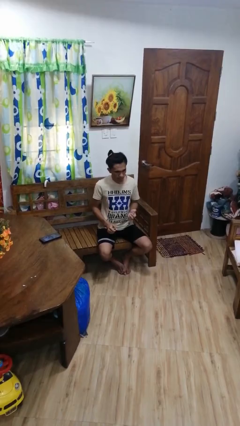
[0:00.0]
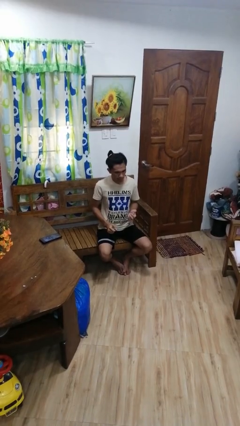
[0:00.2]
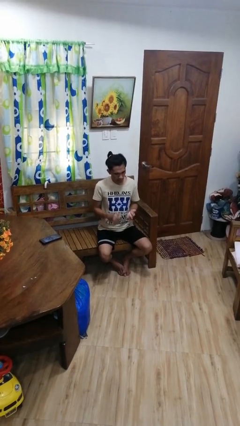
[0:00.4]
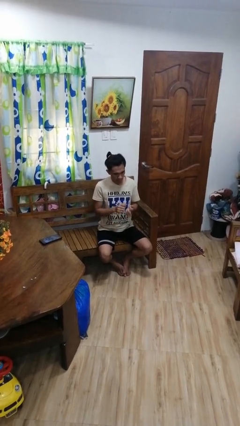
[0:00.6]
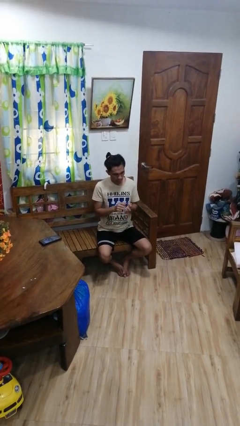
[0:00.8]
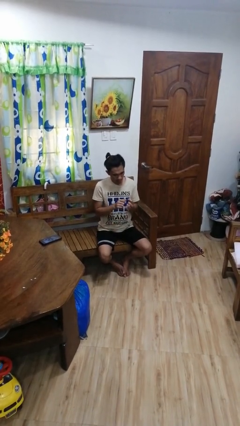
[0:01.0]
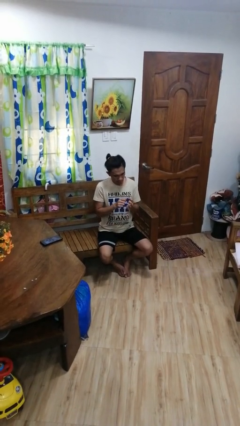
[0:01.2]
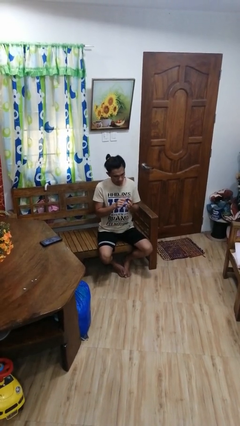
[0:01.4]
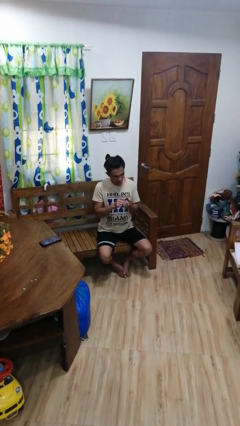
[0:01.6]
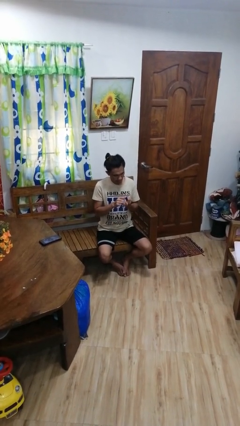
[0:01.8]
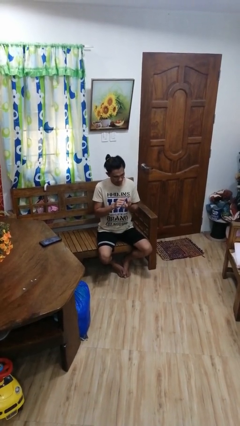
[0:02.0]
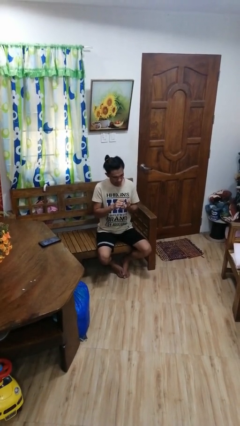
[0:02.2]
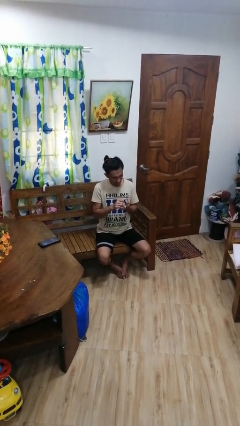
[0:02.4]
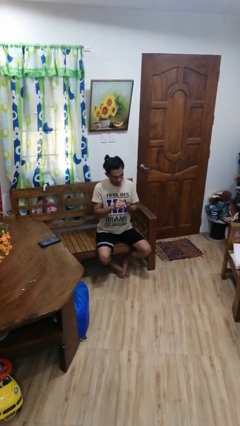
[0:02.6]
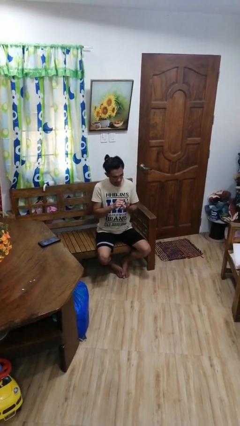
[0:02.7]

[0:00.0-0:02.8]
person files fingernails

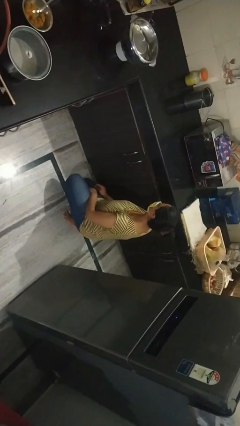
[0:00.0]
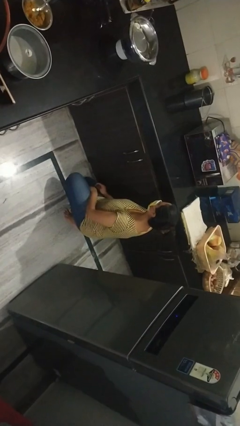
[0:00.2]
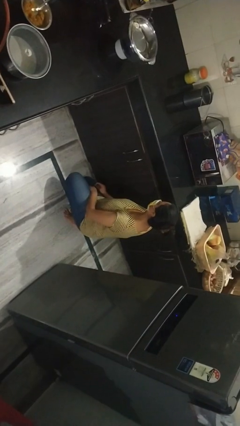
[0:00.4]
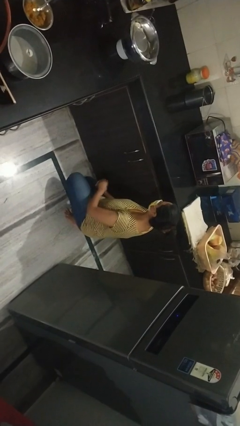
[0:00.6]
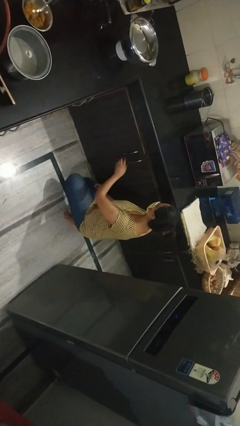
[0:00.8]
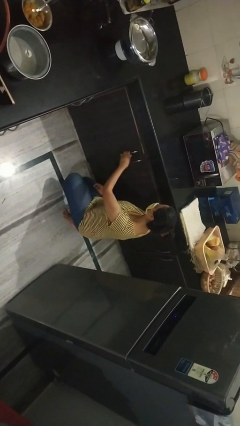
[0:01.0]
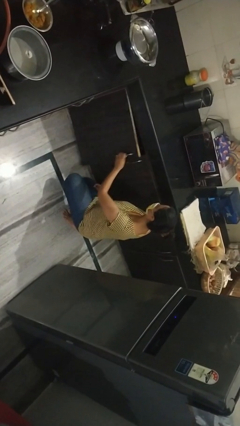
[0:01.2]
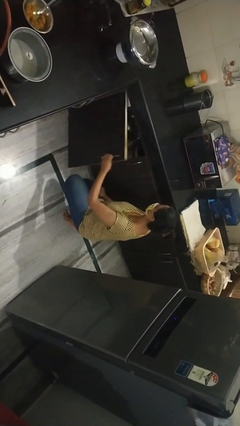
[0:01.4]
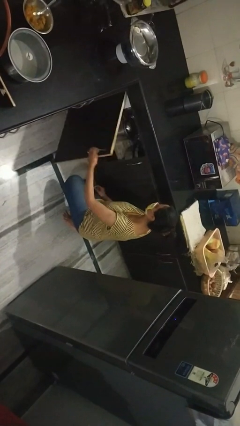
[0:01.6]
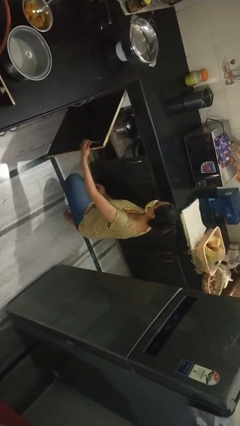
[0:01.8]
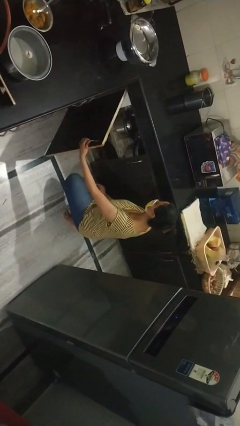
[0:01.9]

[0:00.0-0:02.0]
person opens cabinet

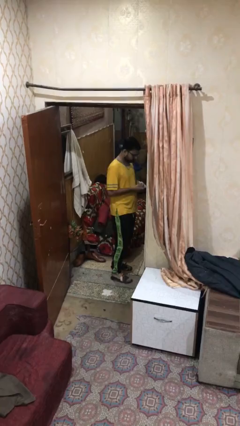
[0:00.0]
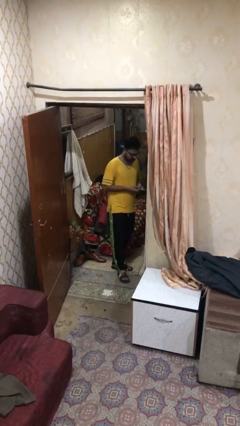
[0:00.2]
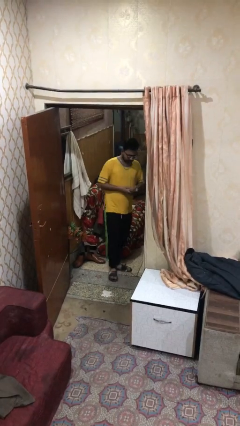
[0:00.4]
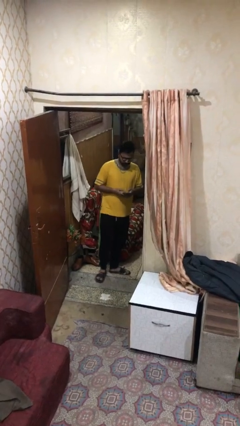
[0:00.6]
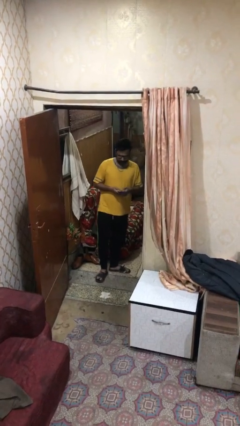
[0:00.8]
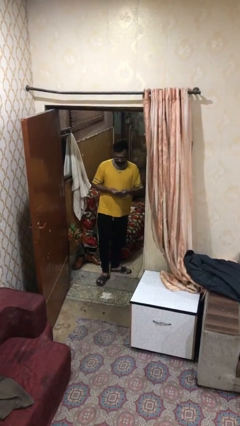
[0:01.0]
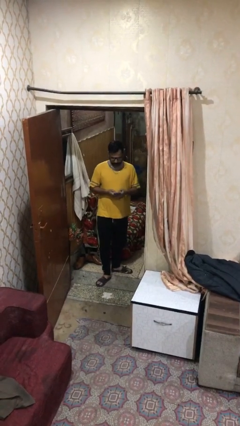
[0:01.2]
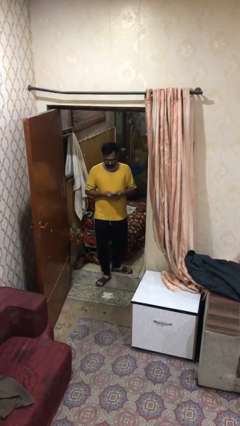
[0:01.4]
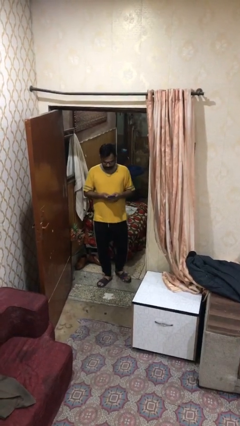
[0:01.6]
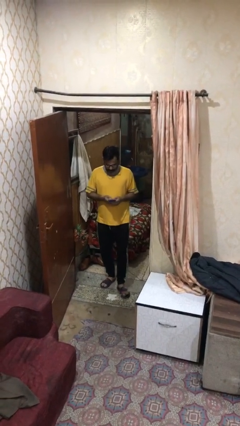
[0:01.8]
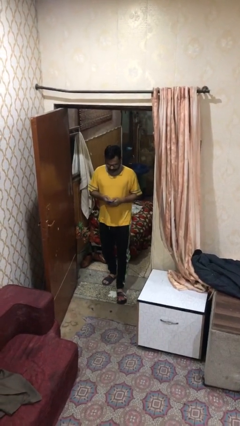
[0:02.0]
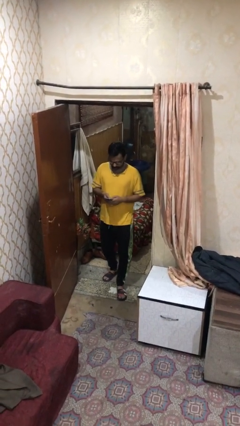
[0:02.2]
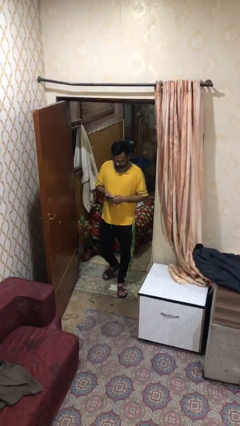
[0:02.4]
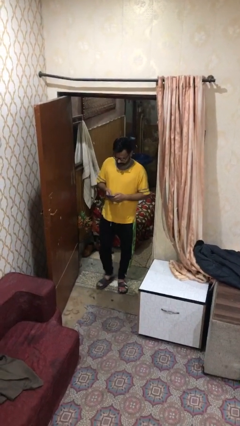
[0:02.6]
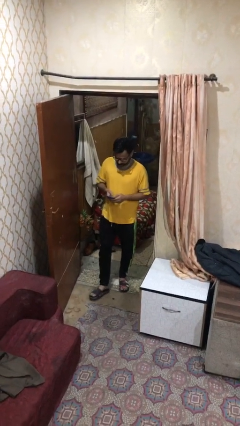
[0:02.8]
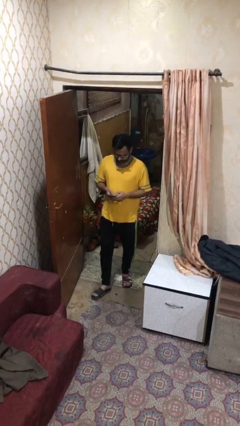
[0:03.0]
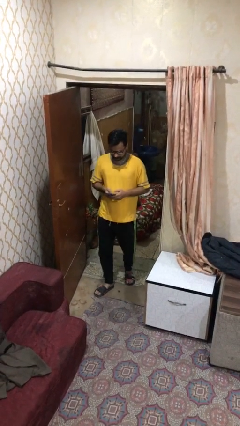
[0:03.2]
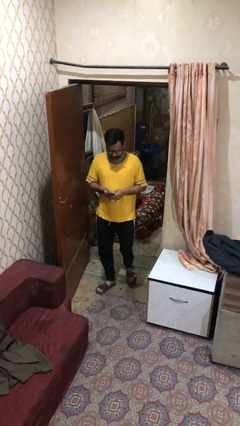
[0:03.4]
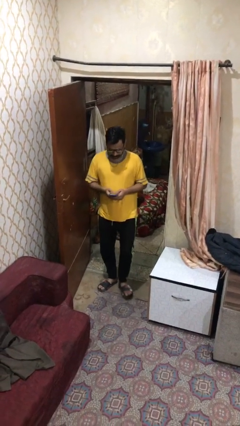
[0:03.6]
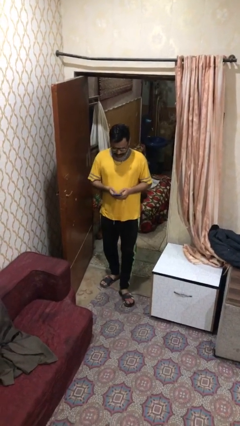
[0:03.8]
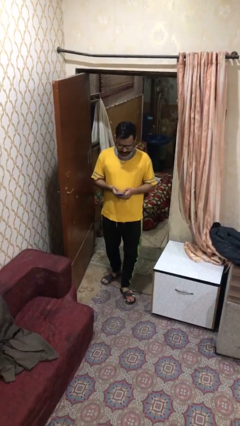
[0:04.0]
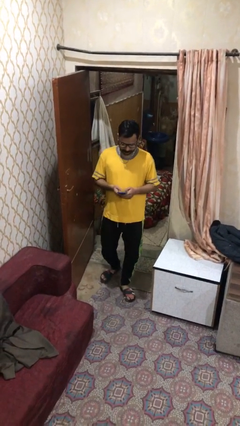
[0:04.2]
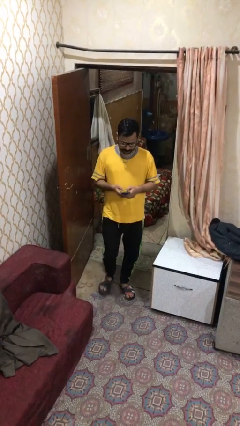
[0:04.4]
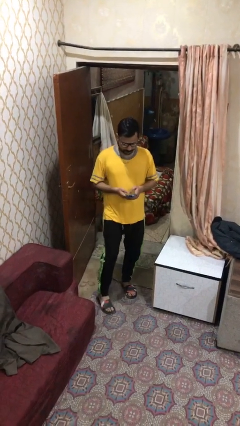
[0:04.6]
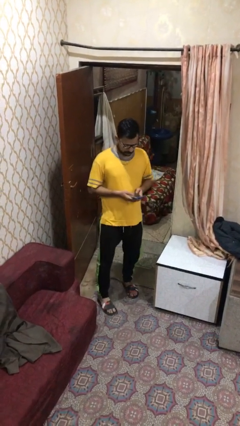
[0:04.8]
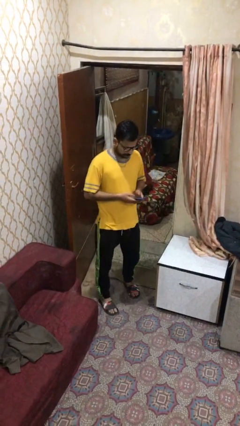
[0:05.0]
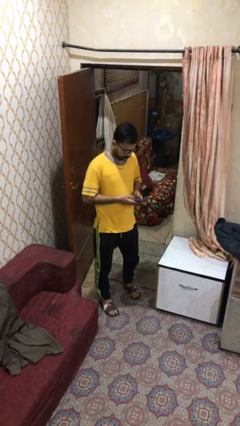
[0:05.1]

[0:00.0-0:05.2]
person enters scene through structure

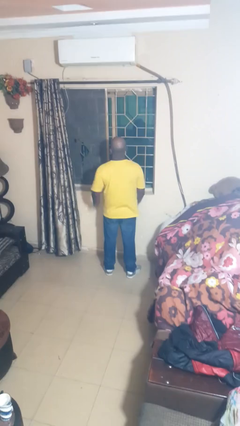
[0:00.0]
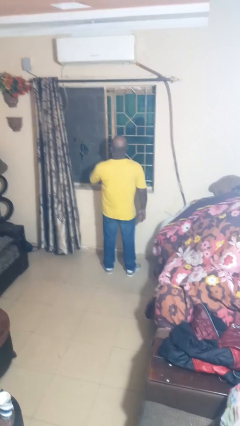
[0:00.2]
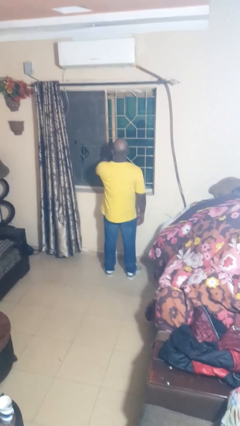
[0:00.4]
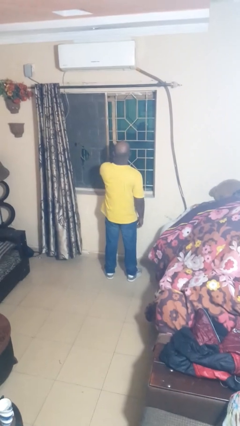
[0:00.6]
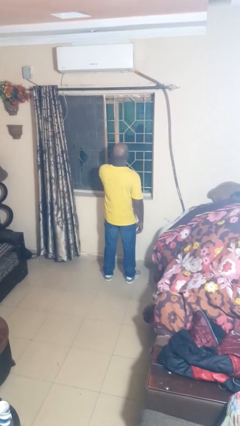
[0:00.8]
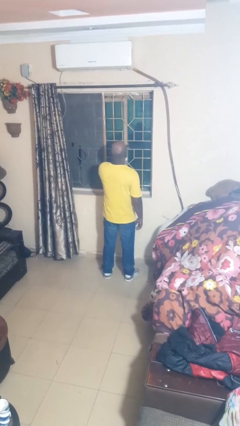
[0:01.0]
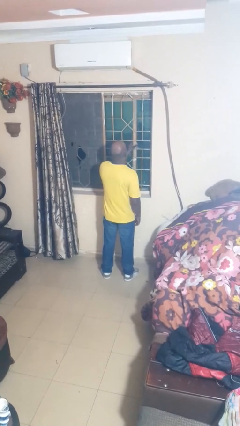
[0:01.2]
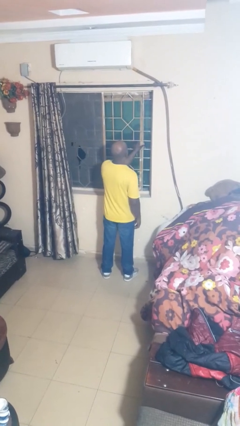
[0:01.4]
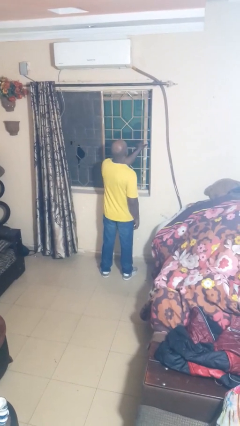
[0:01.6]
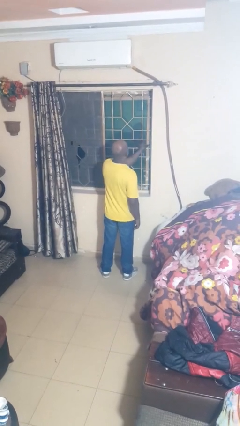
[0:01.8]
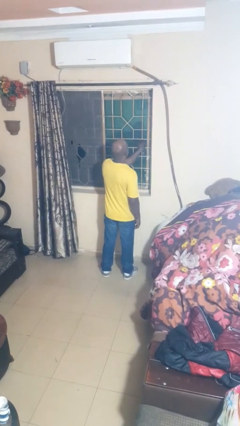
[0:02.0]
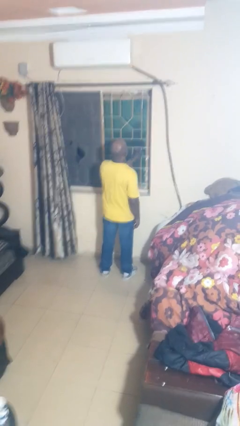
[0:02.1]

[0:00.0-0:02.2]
person closes home window

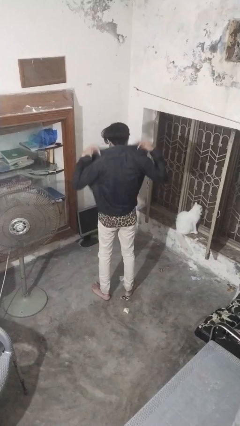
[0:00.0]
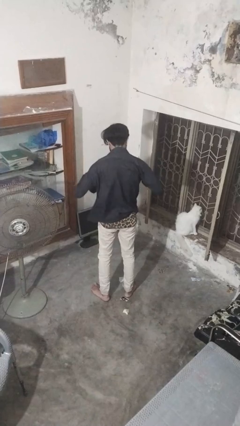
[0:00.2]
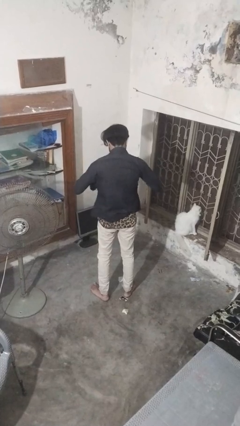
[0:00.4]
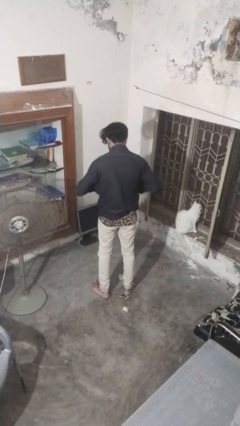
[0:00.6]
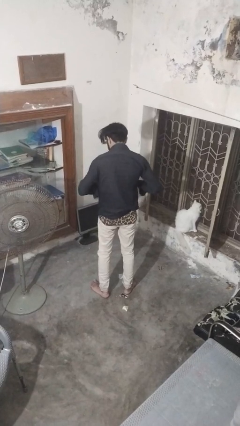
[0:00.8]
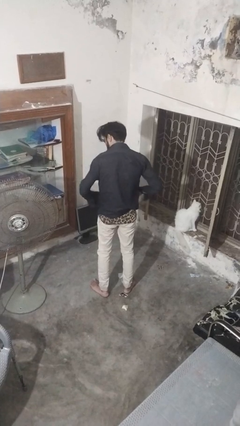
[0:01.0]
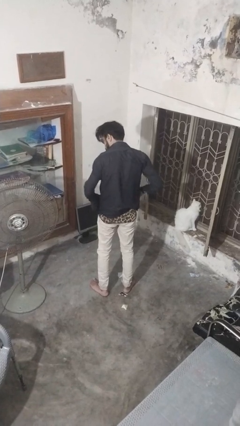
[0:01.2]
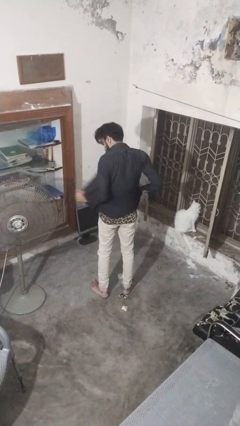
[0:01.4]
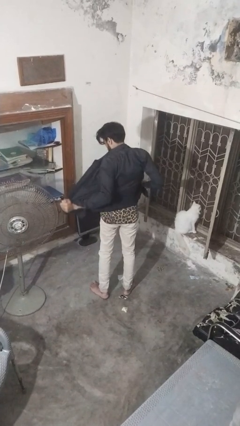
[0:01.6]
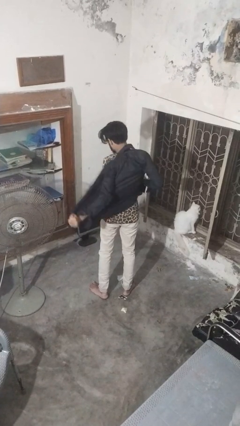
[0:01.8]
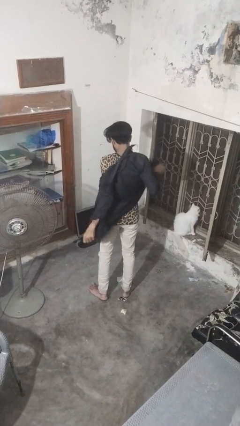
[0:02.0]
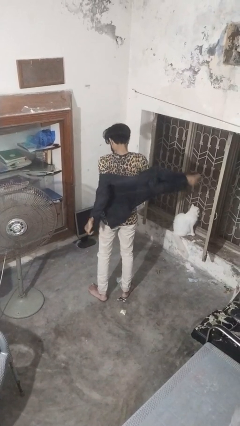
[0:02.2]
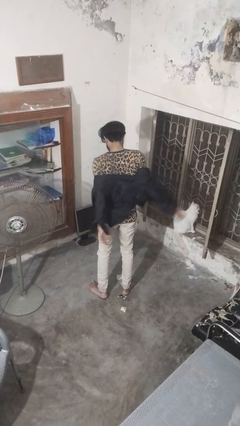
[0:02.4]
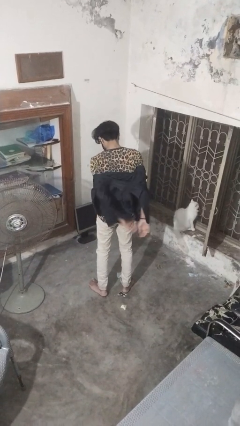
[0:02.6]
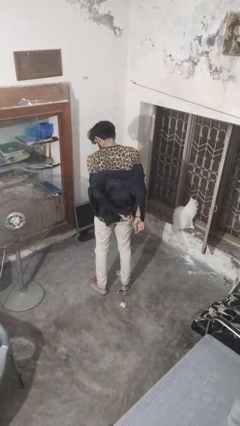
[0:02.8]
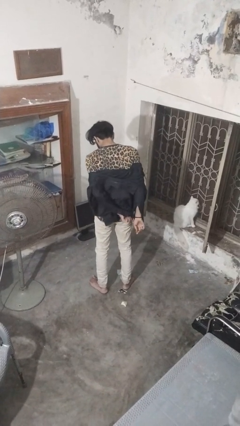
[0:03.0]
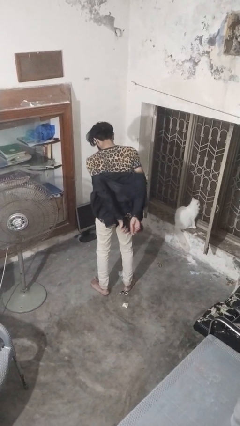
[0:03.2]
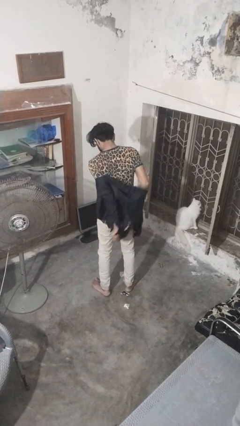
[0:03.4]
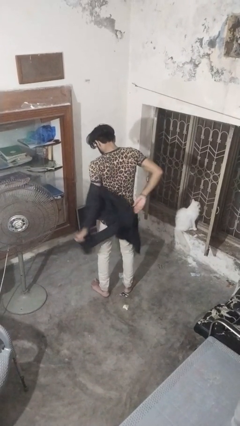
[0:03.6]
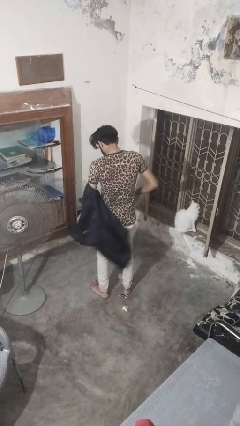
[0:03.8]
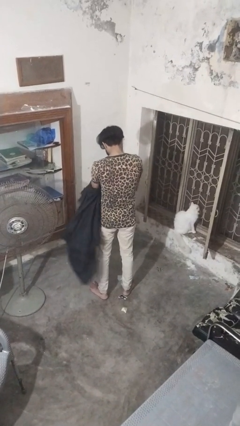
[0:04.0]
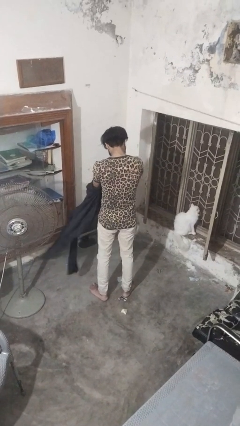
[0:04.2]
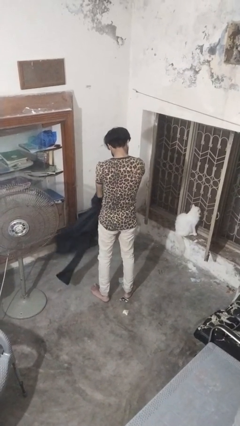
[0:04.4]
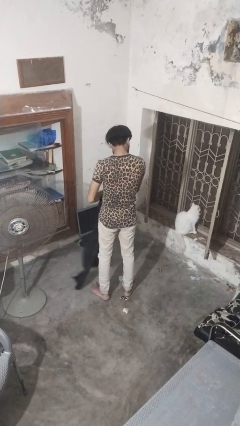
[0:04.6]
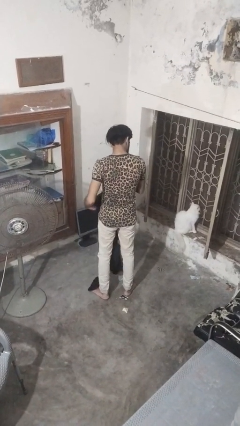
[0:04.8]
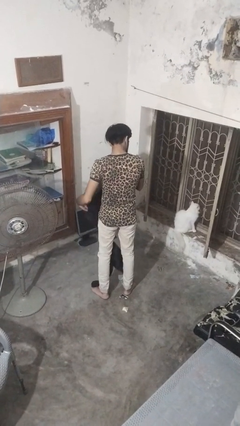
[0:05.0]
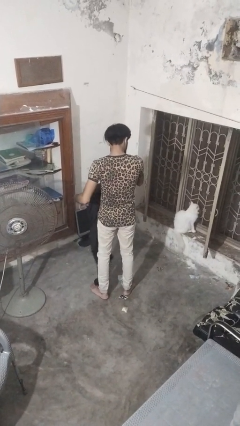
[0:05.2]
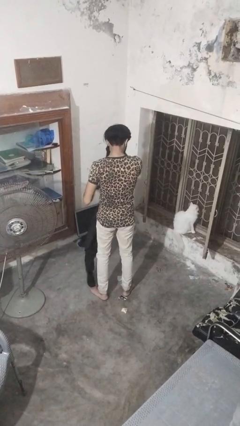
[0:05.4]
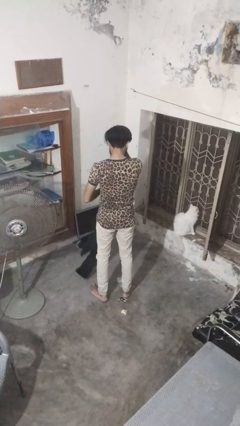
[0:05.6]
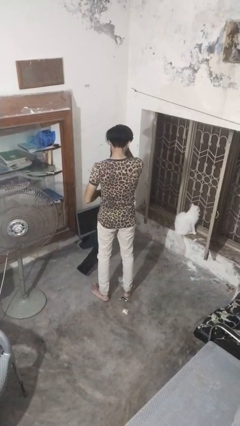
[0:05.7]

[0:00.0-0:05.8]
person takes off shirt
